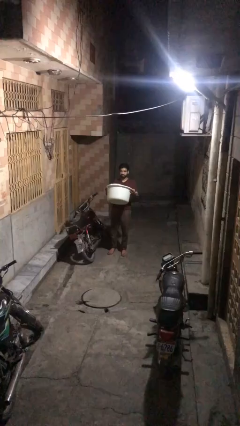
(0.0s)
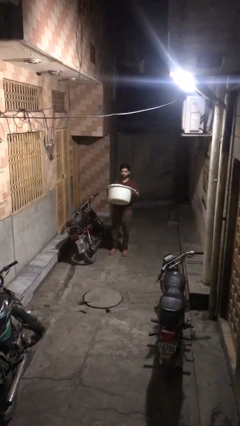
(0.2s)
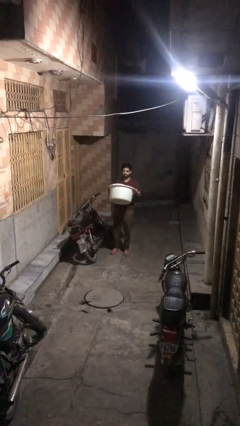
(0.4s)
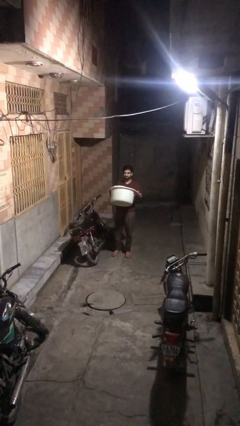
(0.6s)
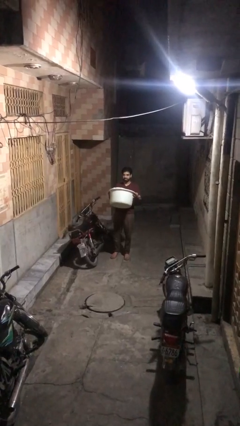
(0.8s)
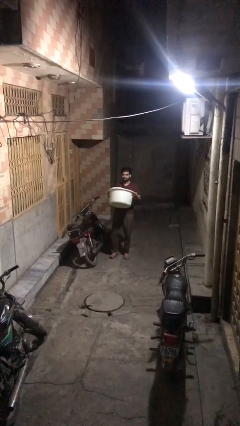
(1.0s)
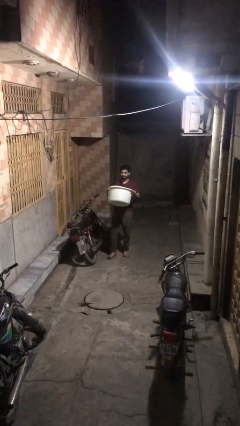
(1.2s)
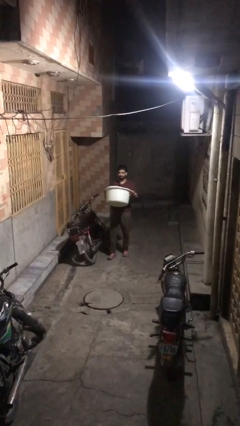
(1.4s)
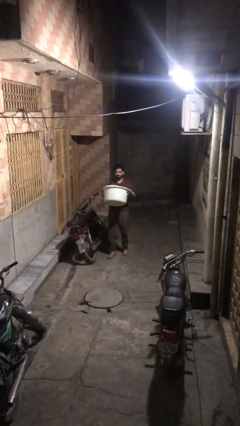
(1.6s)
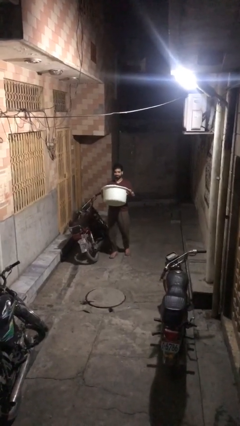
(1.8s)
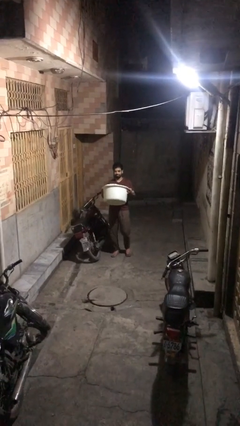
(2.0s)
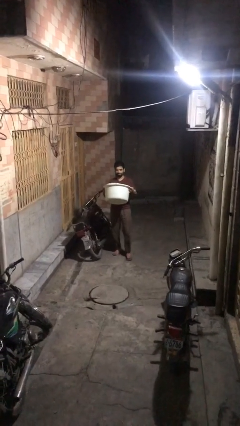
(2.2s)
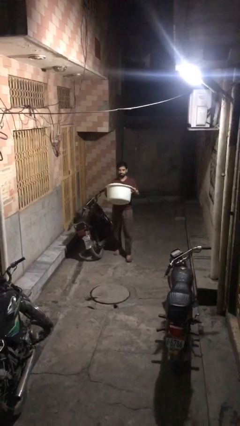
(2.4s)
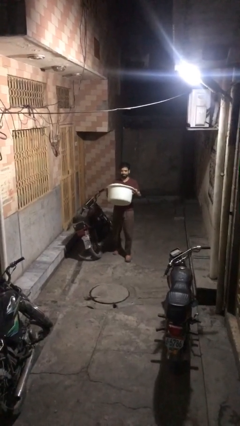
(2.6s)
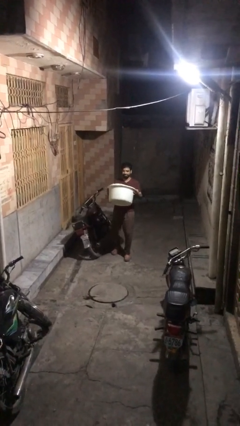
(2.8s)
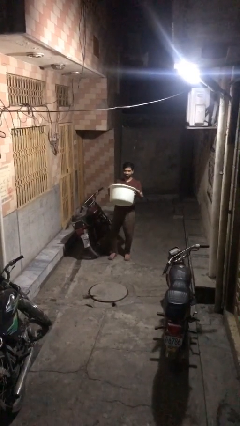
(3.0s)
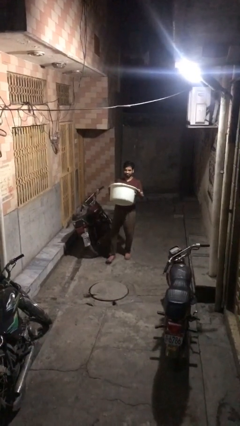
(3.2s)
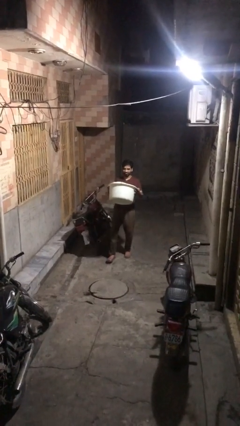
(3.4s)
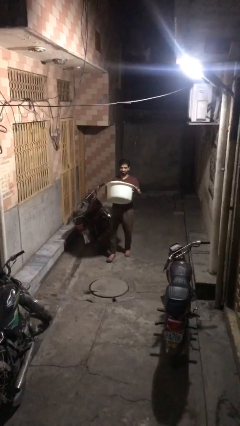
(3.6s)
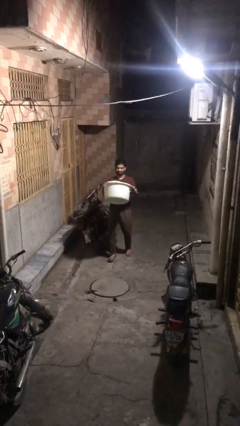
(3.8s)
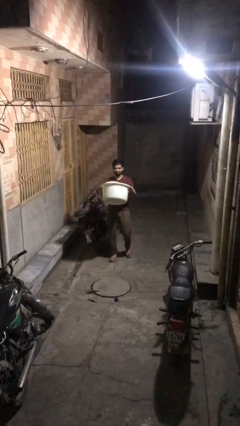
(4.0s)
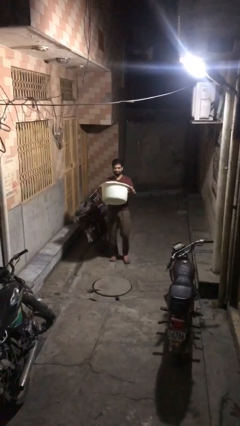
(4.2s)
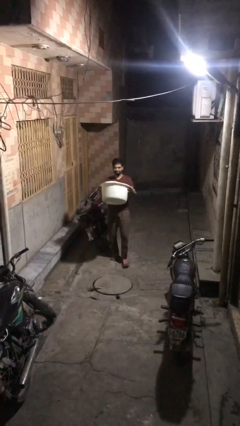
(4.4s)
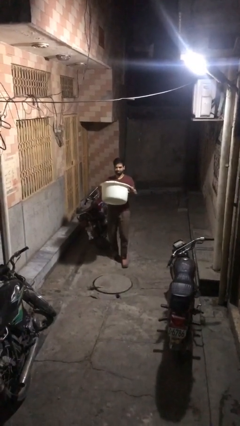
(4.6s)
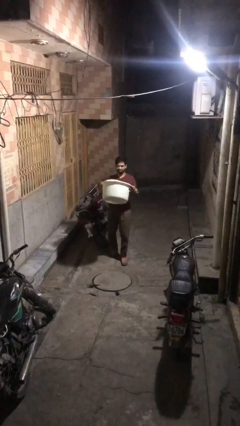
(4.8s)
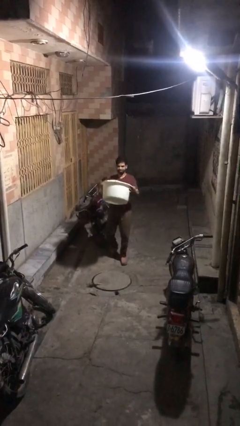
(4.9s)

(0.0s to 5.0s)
person carries heavy object

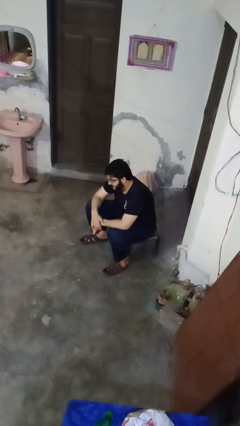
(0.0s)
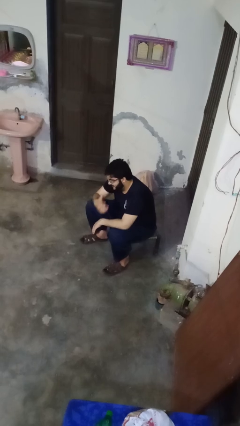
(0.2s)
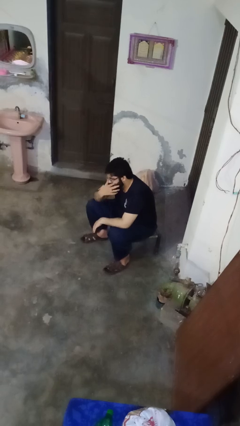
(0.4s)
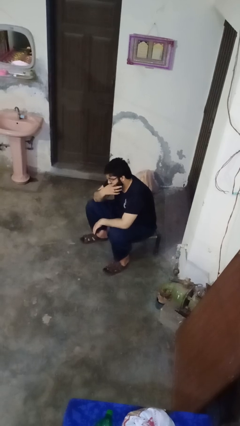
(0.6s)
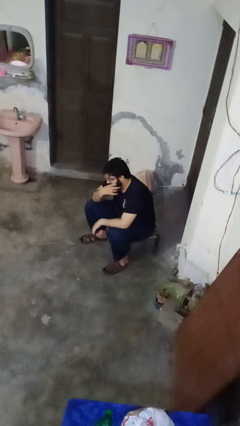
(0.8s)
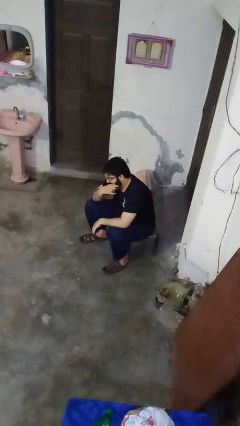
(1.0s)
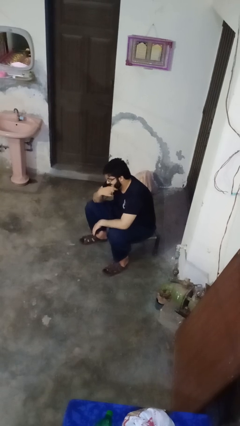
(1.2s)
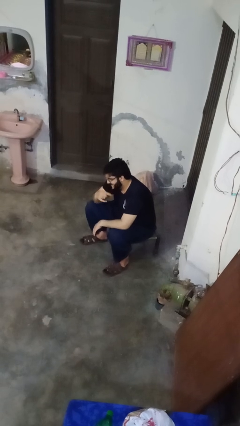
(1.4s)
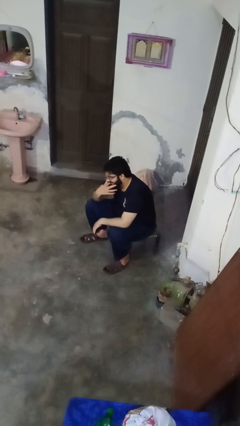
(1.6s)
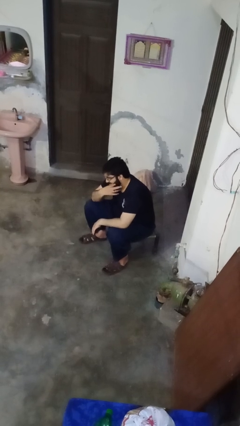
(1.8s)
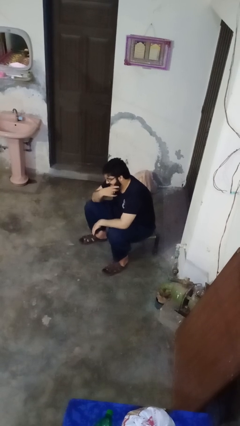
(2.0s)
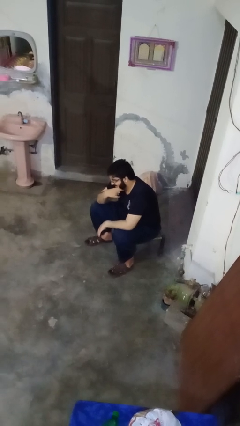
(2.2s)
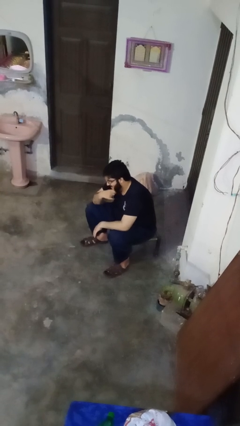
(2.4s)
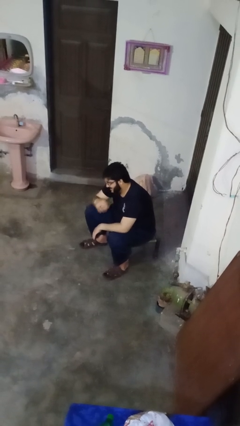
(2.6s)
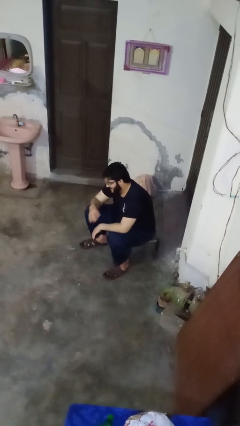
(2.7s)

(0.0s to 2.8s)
person strokes chin

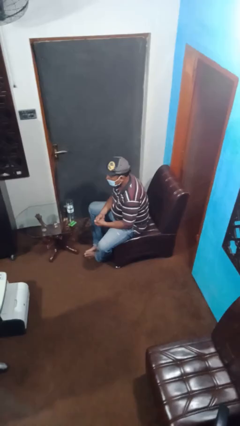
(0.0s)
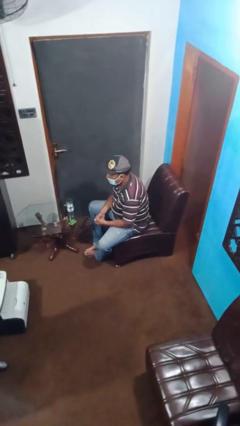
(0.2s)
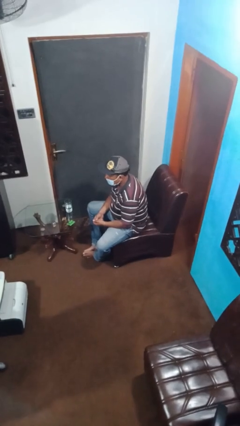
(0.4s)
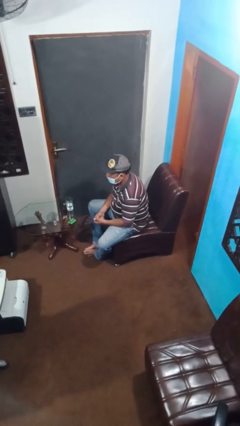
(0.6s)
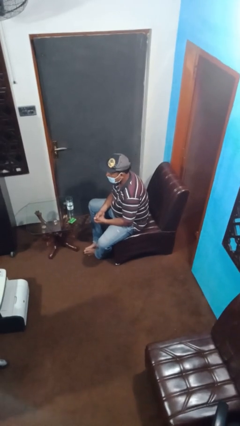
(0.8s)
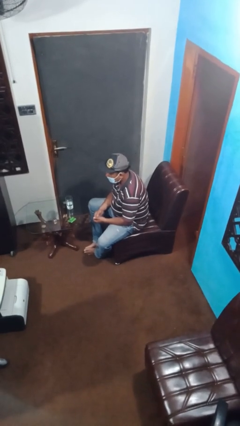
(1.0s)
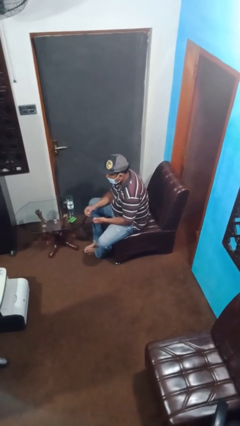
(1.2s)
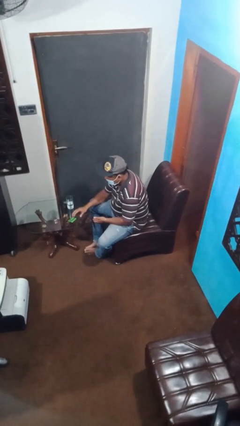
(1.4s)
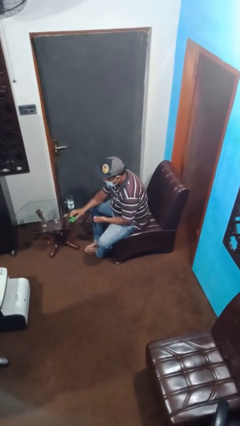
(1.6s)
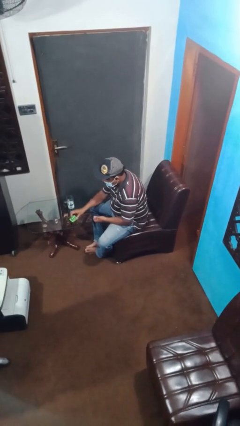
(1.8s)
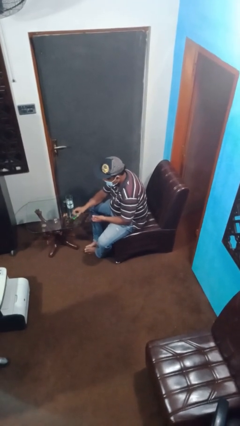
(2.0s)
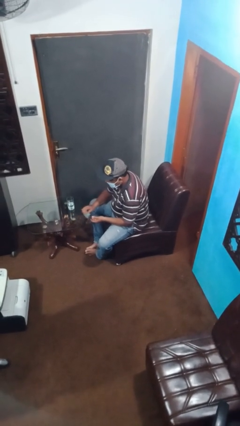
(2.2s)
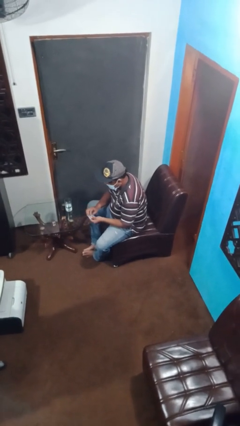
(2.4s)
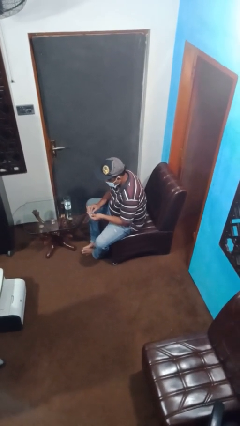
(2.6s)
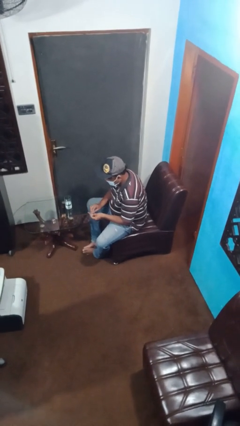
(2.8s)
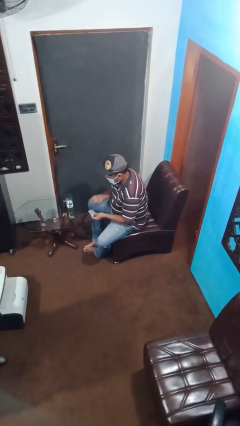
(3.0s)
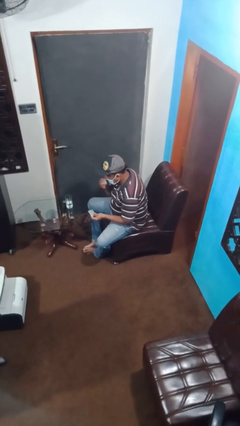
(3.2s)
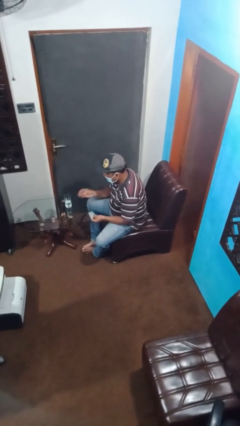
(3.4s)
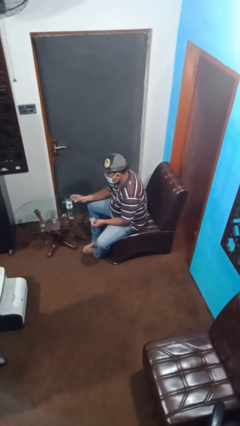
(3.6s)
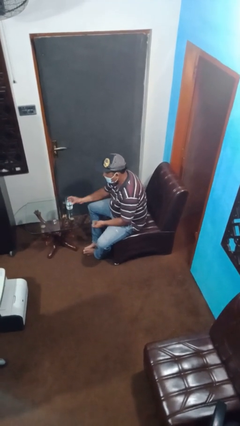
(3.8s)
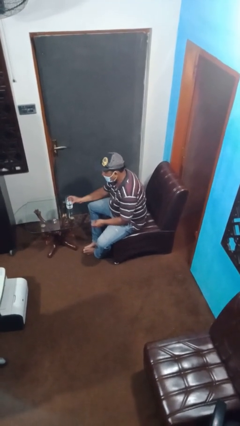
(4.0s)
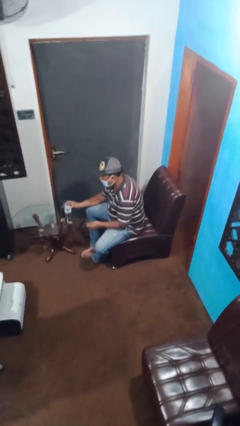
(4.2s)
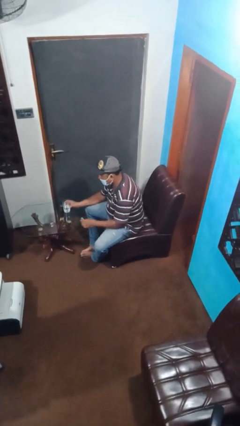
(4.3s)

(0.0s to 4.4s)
person takes medicine pills

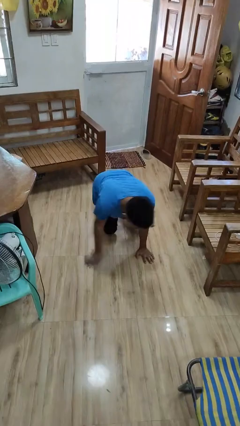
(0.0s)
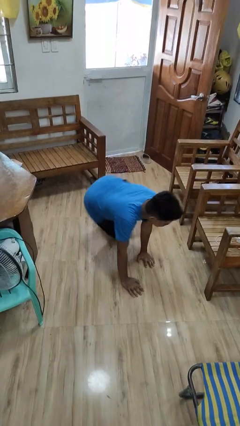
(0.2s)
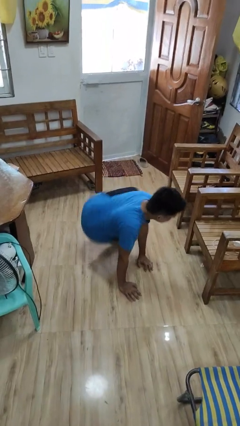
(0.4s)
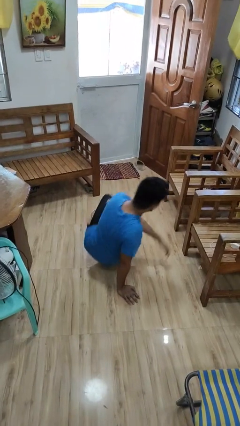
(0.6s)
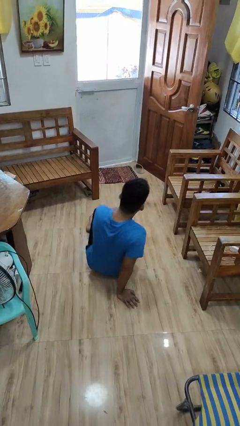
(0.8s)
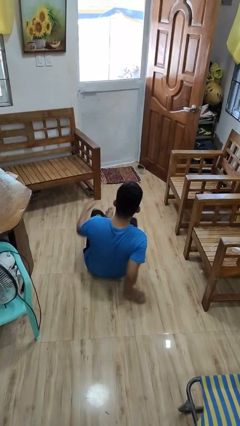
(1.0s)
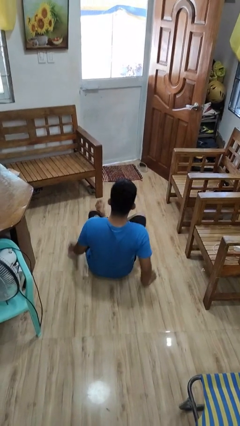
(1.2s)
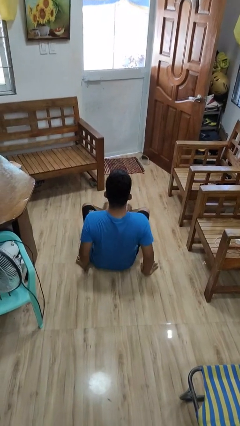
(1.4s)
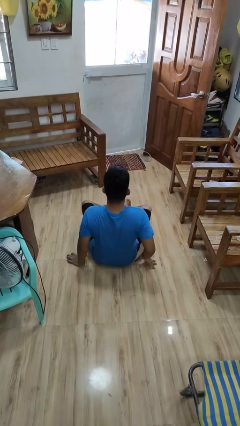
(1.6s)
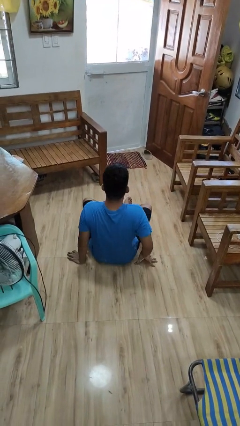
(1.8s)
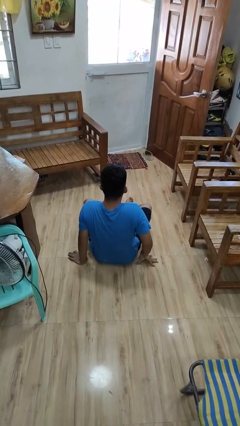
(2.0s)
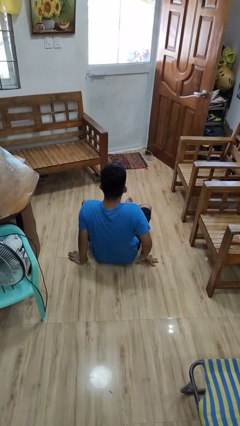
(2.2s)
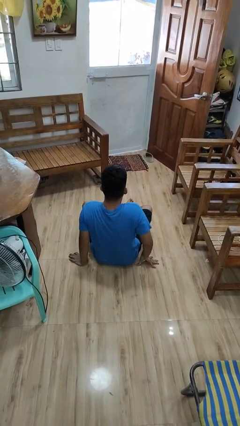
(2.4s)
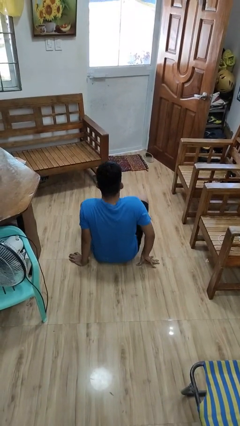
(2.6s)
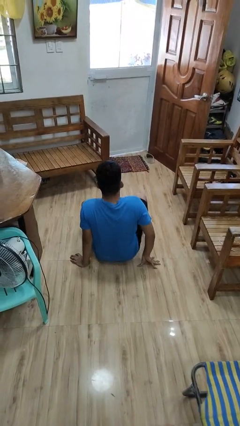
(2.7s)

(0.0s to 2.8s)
person lies down on floor

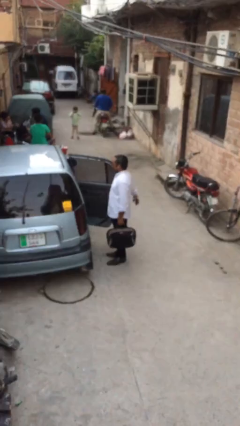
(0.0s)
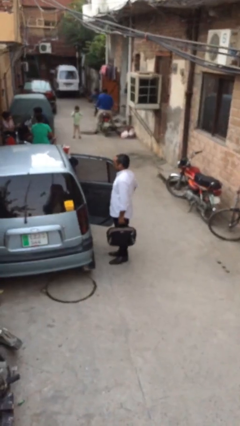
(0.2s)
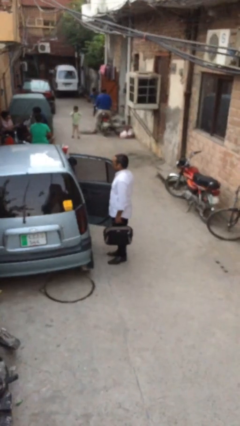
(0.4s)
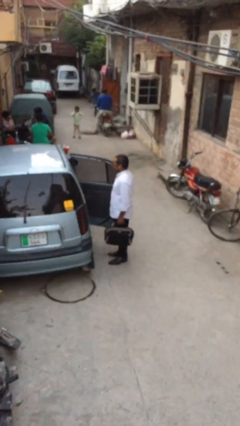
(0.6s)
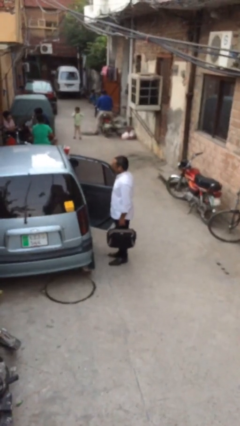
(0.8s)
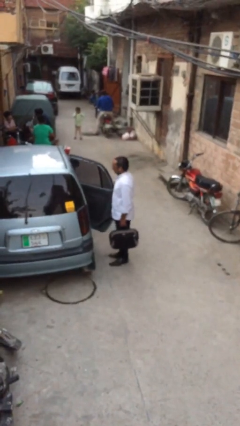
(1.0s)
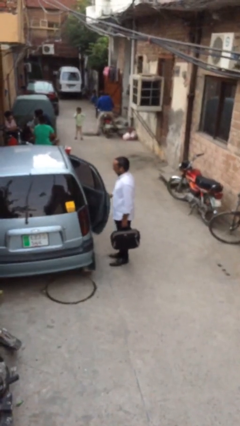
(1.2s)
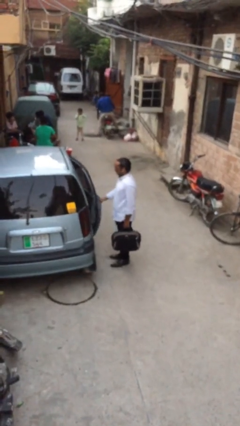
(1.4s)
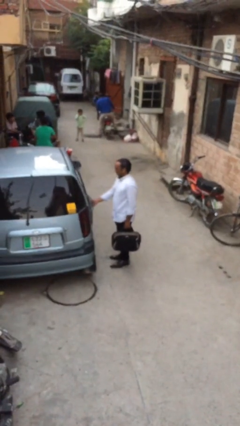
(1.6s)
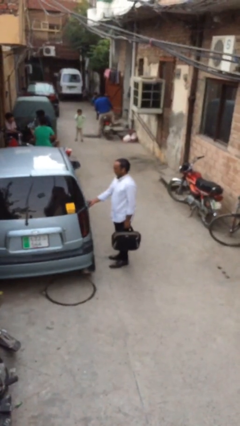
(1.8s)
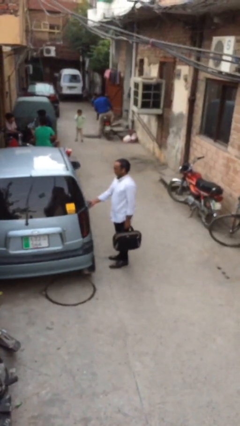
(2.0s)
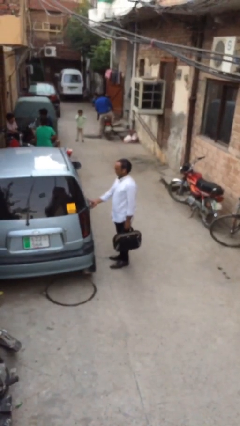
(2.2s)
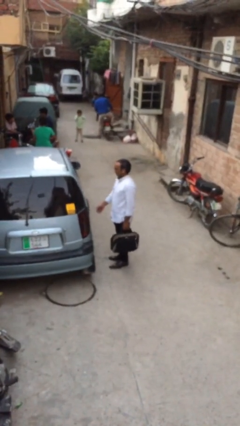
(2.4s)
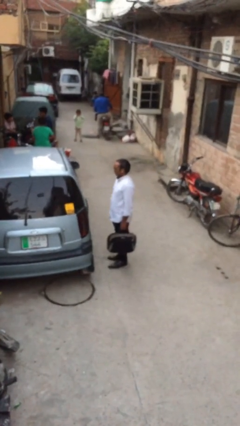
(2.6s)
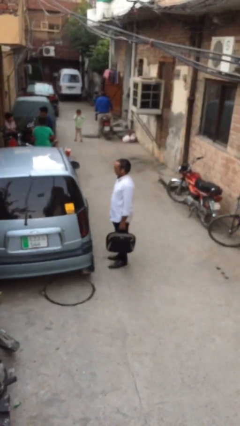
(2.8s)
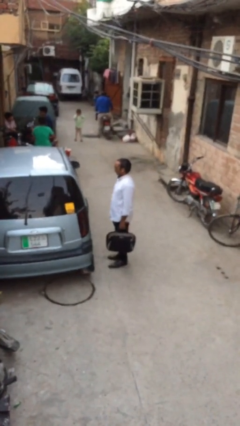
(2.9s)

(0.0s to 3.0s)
person closes car door
